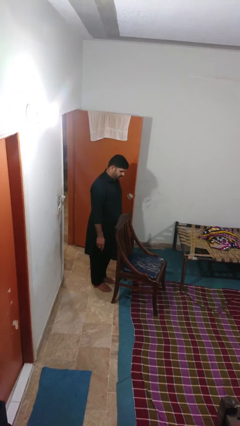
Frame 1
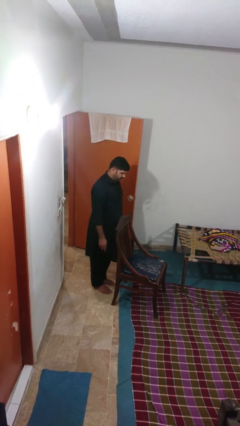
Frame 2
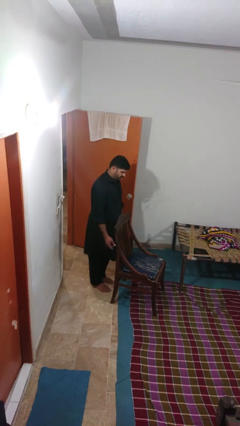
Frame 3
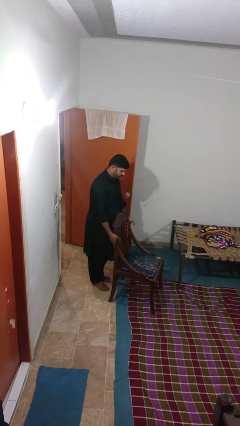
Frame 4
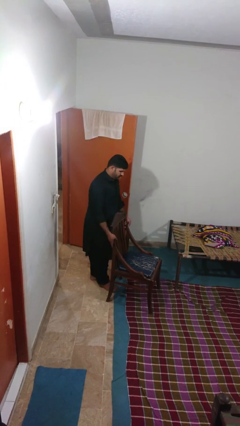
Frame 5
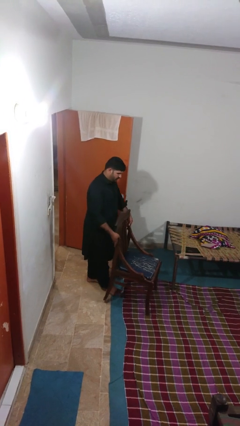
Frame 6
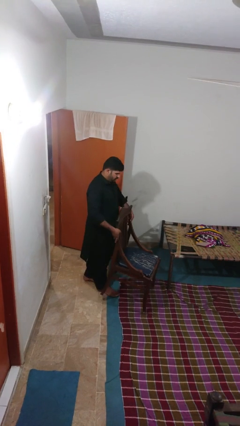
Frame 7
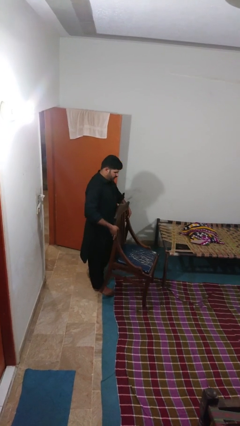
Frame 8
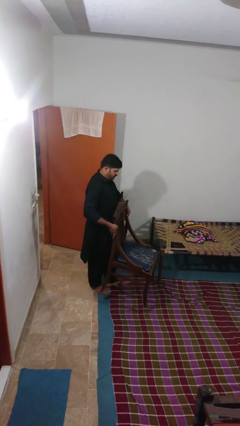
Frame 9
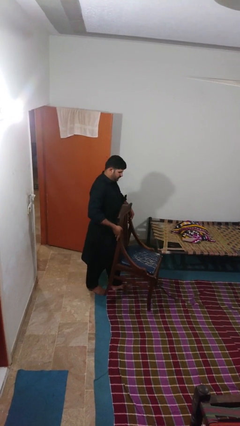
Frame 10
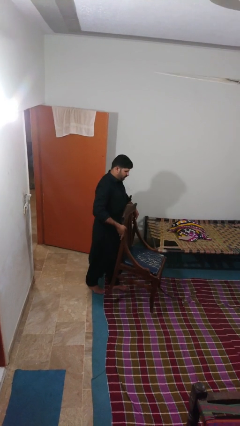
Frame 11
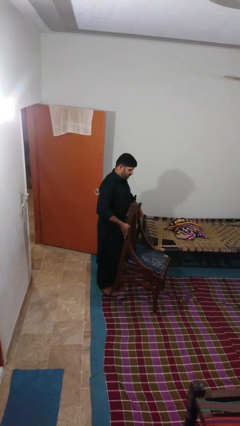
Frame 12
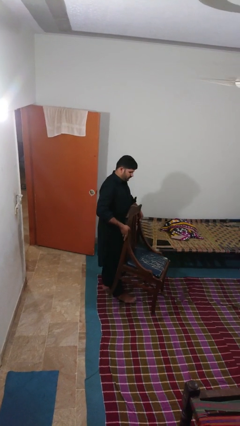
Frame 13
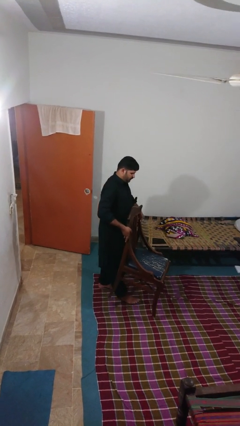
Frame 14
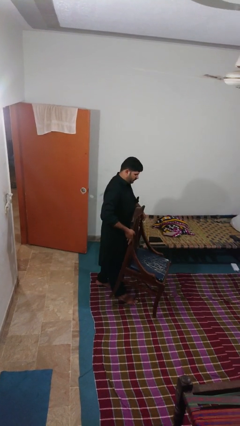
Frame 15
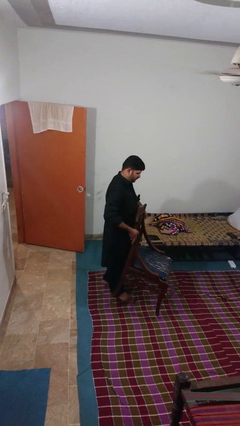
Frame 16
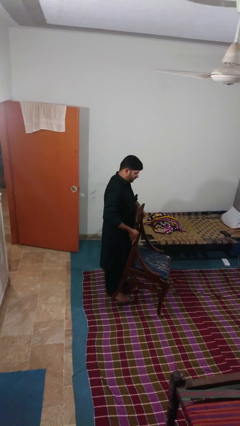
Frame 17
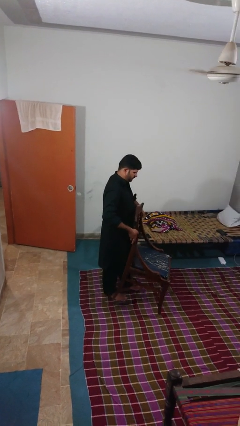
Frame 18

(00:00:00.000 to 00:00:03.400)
person carries furniture

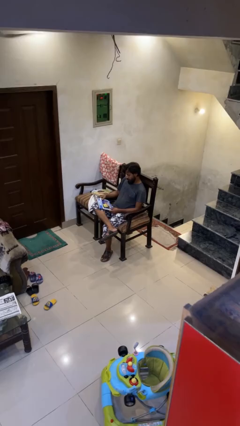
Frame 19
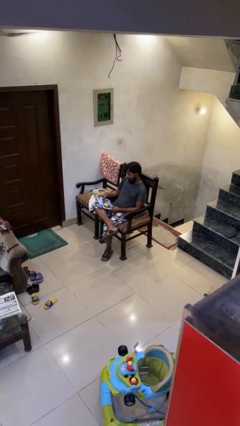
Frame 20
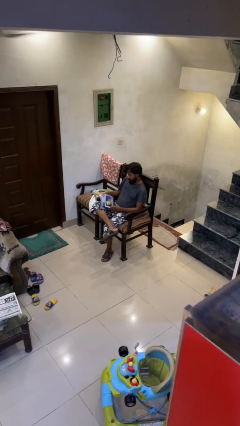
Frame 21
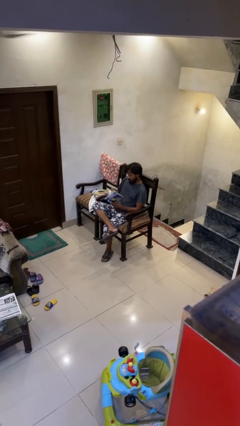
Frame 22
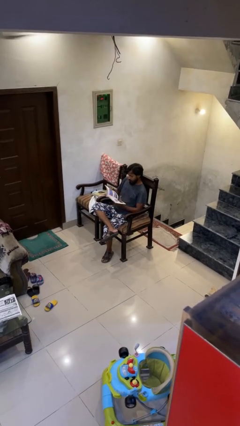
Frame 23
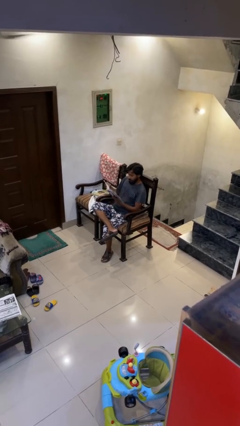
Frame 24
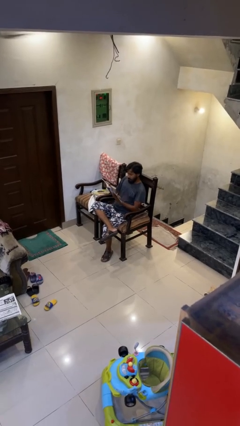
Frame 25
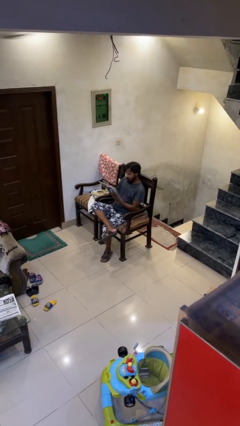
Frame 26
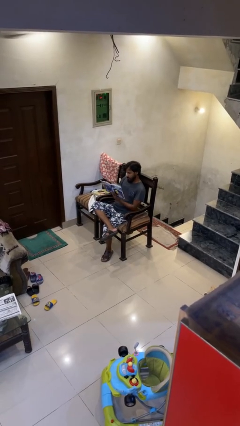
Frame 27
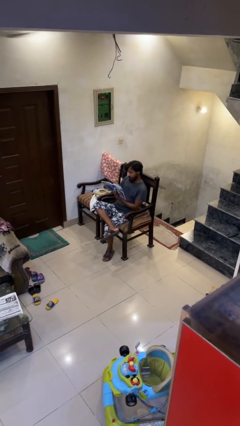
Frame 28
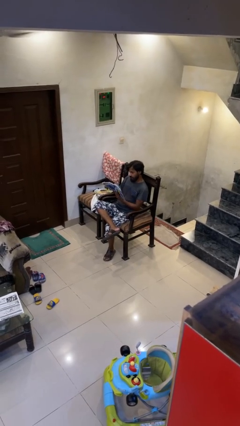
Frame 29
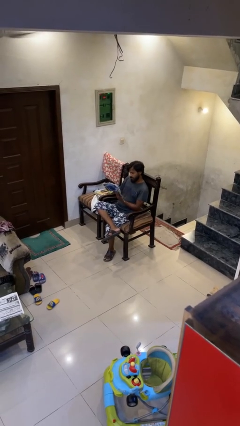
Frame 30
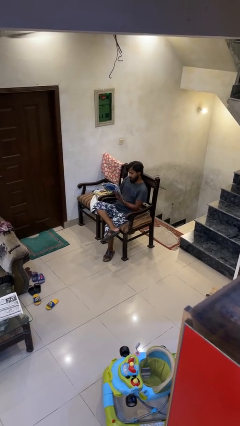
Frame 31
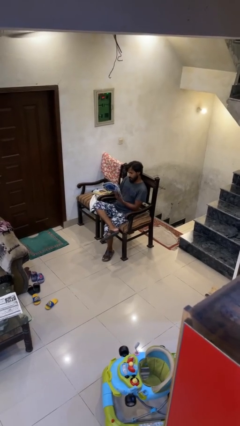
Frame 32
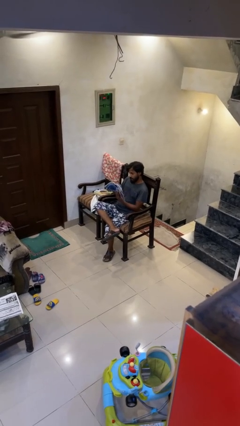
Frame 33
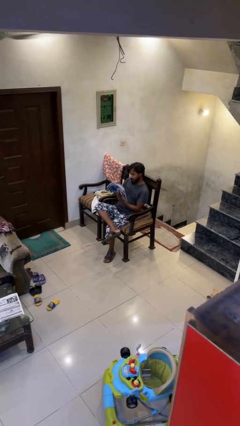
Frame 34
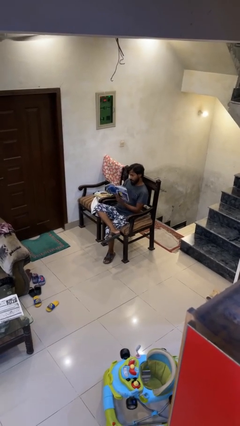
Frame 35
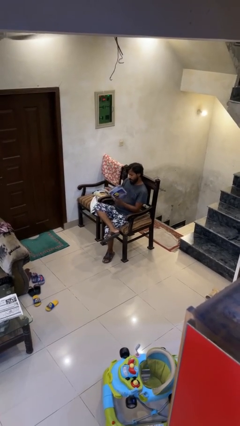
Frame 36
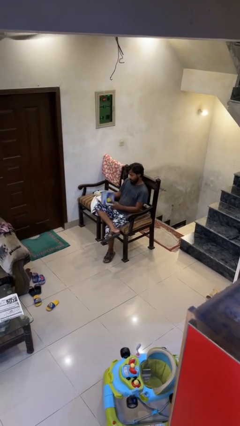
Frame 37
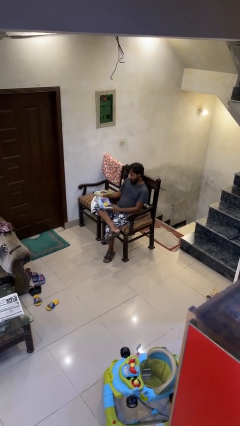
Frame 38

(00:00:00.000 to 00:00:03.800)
person reads book

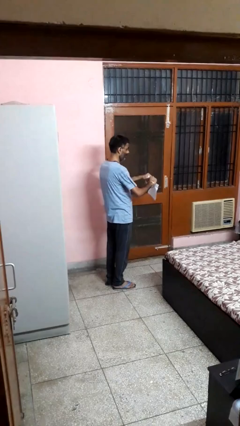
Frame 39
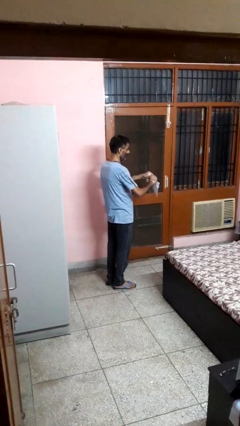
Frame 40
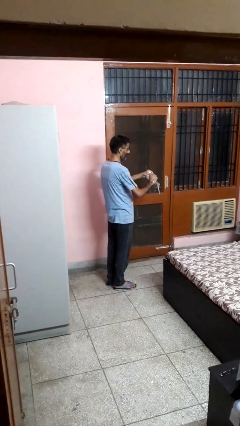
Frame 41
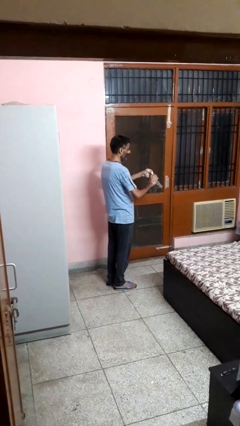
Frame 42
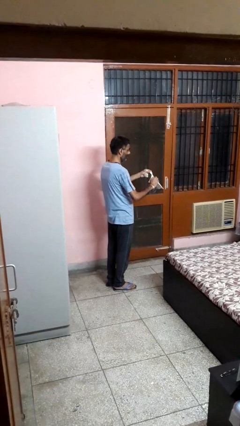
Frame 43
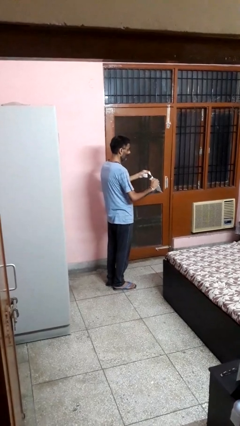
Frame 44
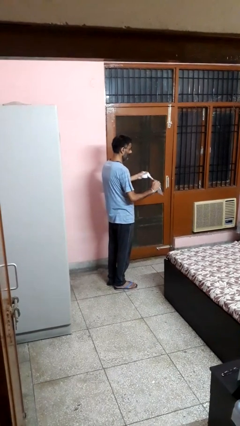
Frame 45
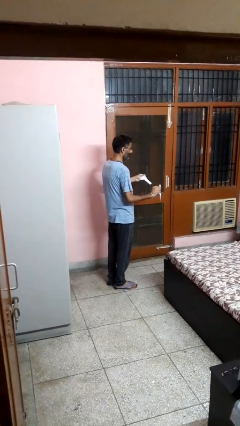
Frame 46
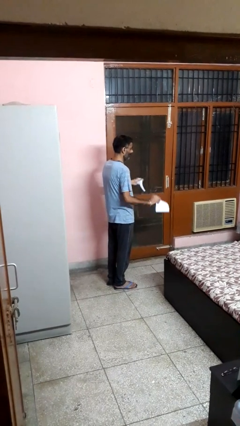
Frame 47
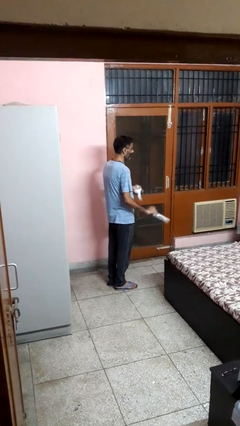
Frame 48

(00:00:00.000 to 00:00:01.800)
person tears paper

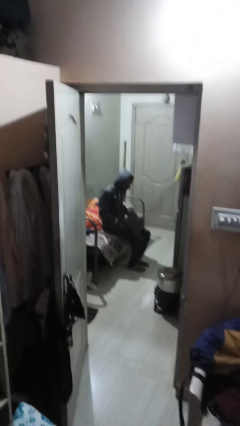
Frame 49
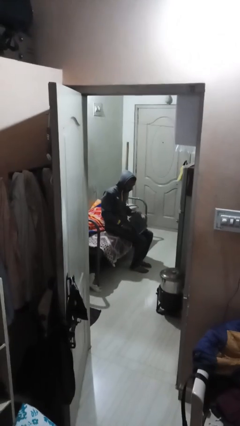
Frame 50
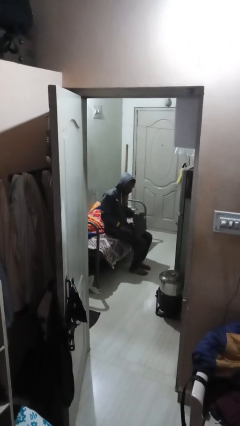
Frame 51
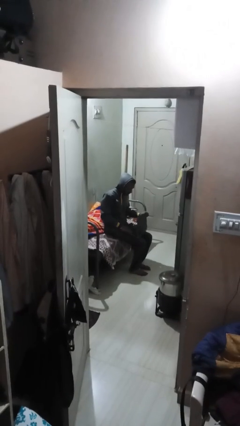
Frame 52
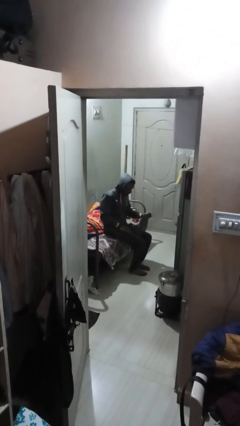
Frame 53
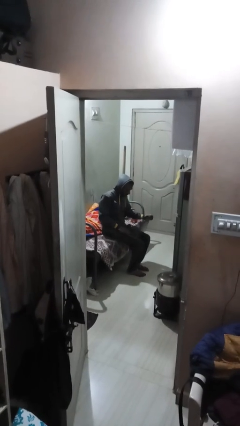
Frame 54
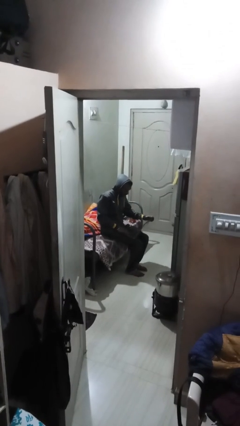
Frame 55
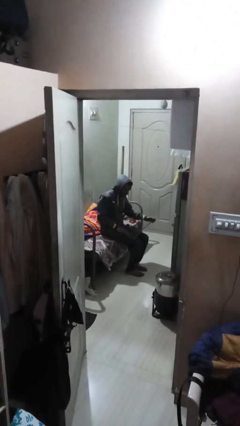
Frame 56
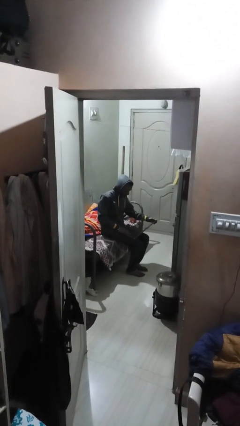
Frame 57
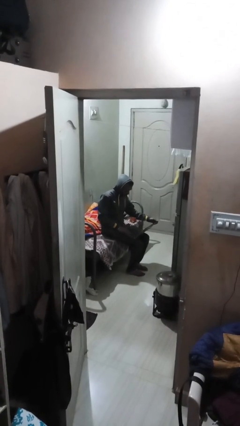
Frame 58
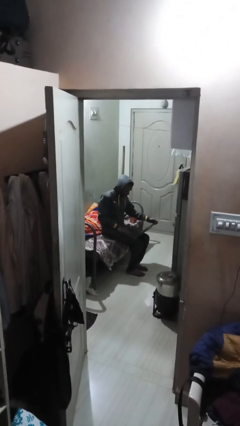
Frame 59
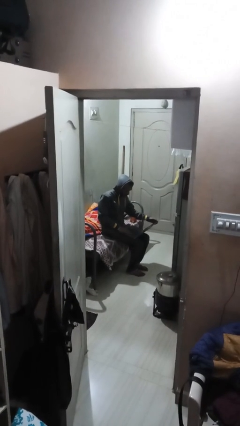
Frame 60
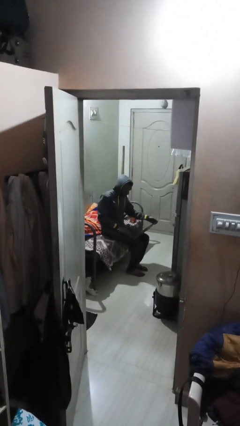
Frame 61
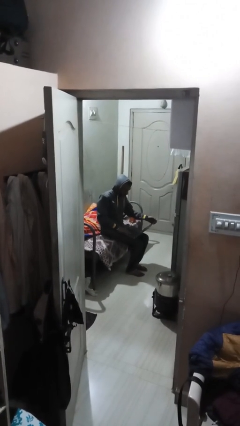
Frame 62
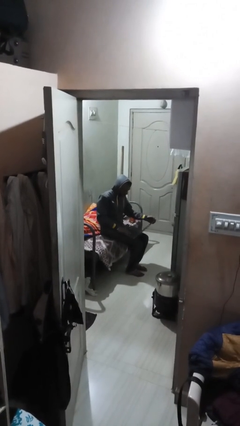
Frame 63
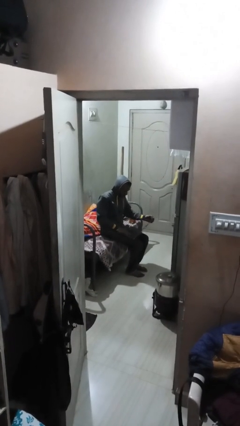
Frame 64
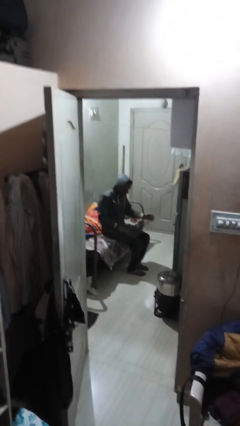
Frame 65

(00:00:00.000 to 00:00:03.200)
person interacts with laptop

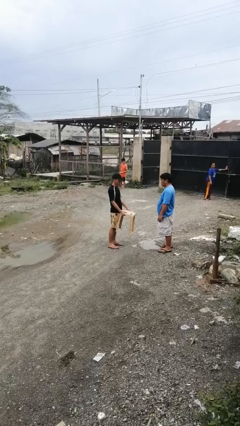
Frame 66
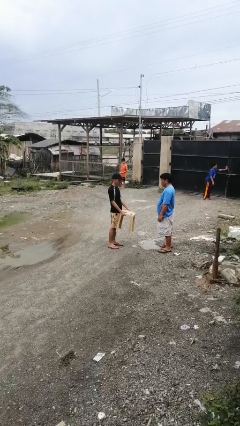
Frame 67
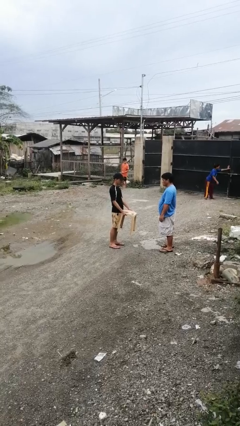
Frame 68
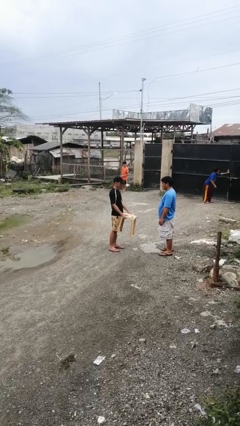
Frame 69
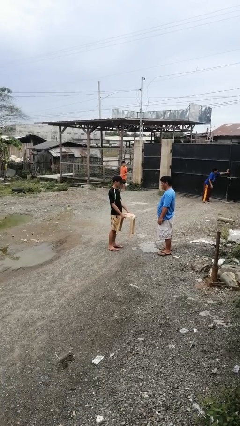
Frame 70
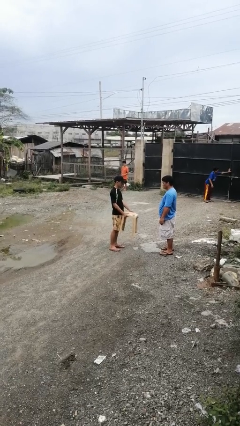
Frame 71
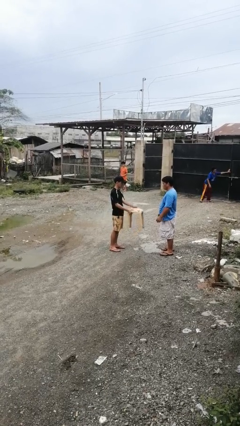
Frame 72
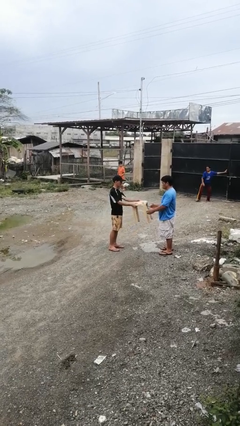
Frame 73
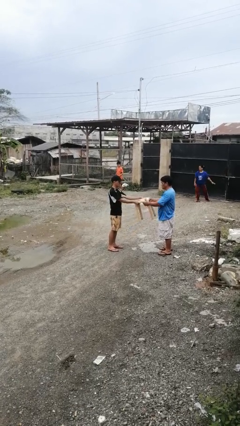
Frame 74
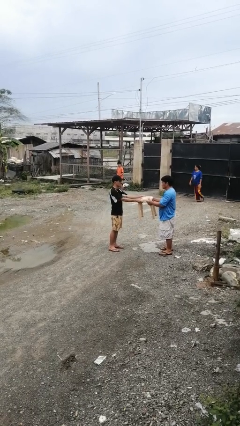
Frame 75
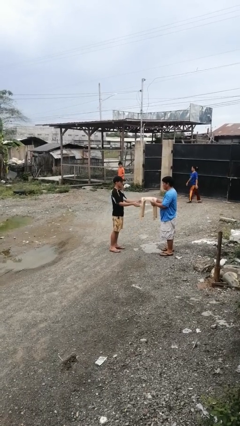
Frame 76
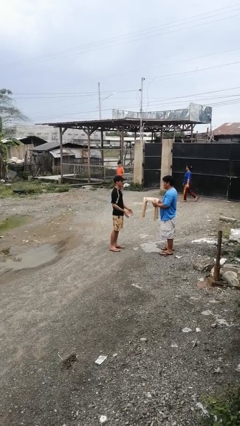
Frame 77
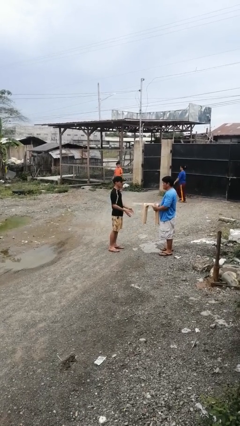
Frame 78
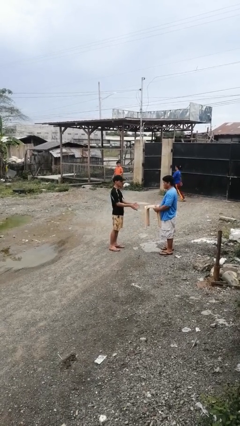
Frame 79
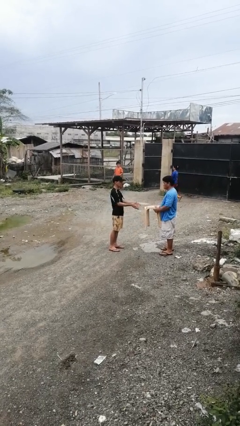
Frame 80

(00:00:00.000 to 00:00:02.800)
person transfers object to person

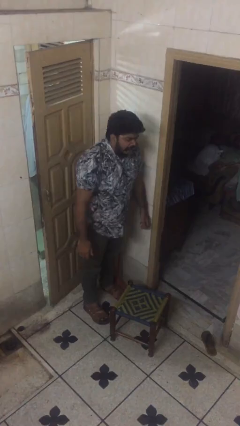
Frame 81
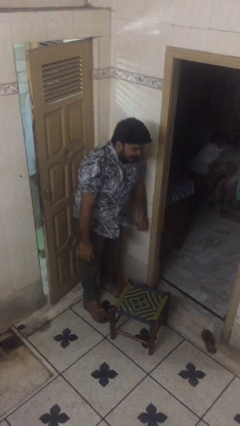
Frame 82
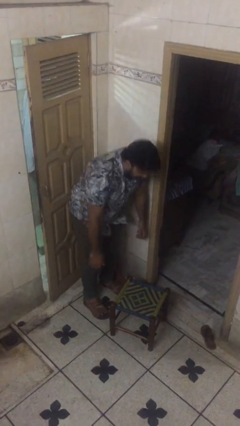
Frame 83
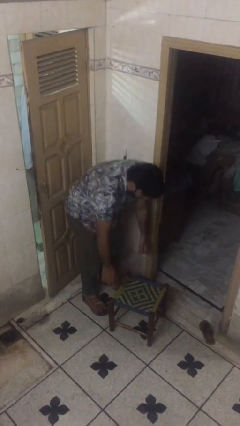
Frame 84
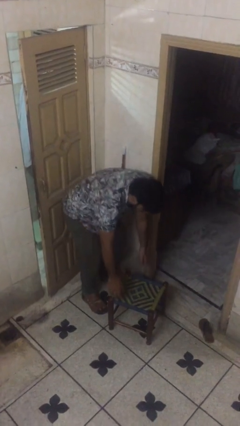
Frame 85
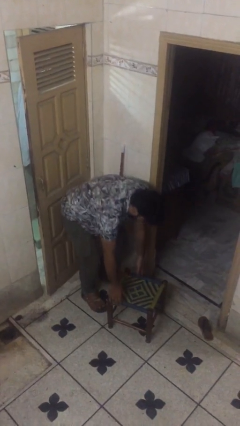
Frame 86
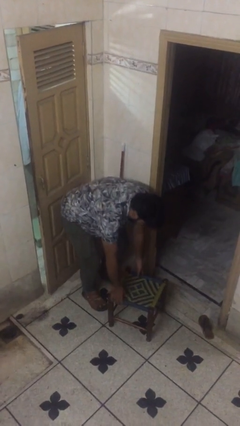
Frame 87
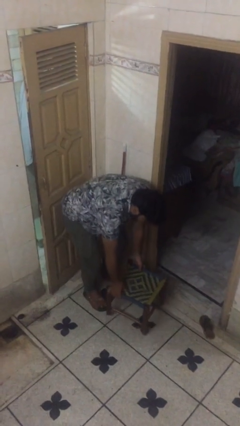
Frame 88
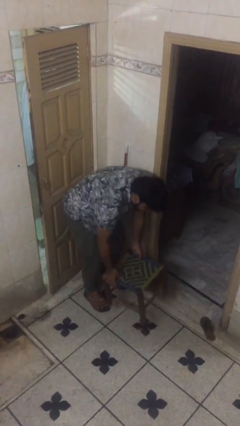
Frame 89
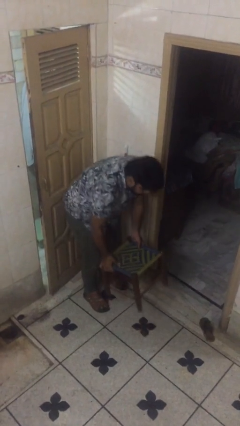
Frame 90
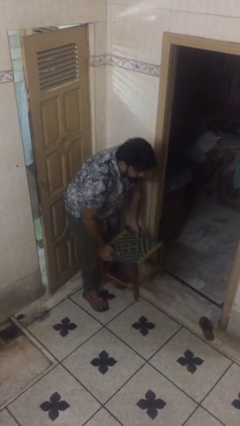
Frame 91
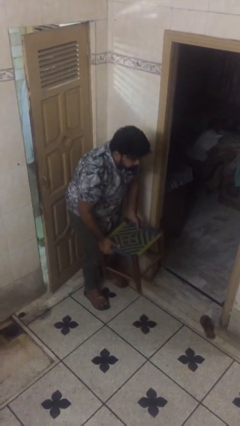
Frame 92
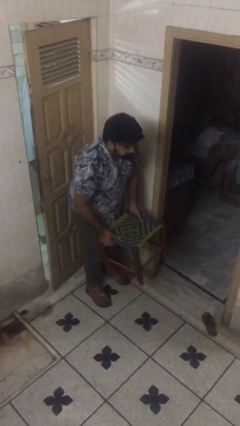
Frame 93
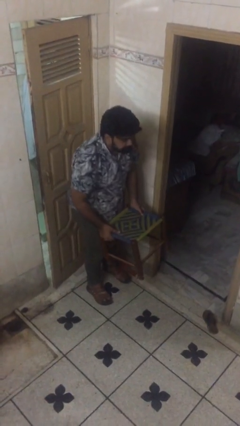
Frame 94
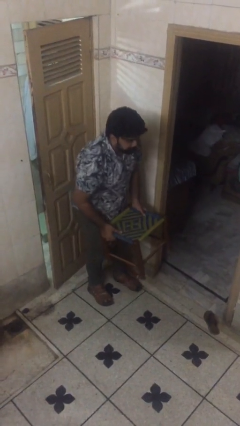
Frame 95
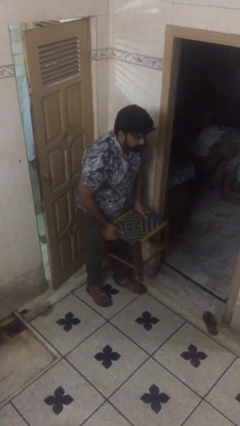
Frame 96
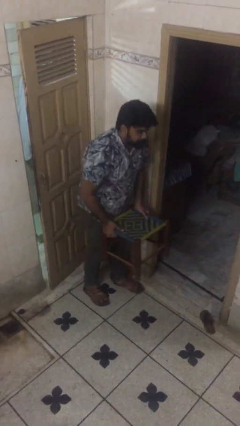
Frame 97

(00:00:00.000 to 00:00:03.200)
person picks up object from floor
